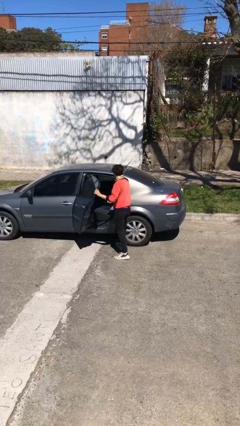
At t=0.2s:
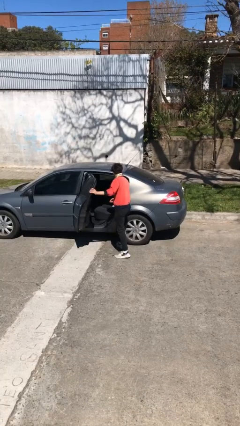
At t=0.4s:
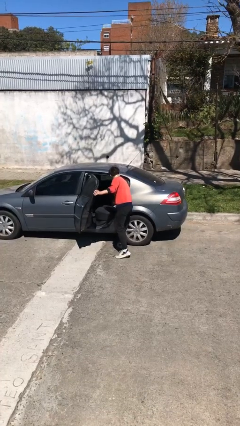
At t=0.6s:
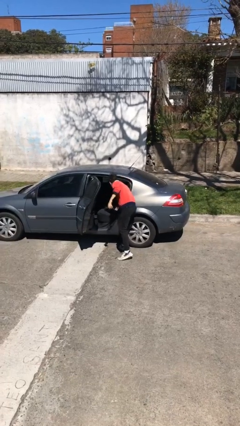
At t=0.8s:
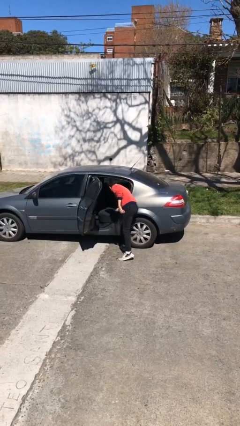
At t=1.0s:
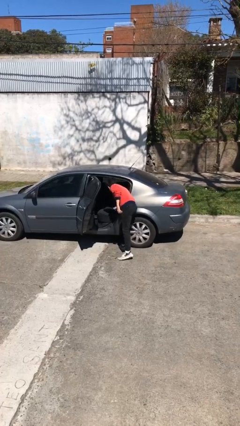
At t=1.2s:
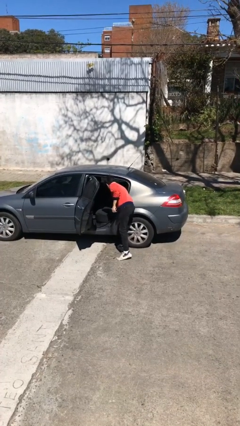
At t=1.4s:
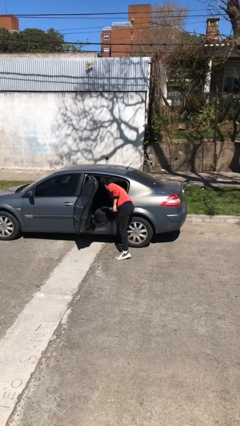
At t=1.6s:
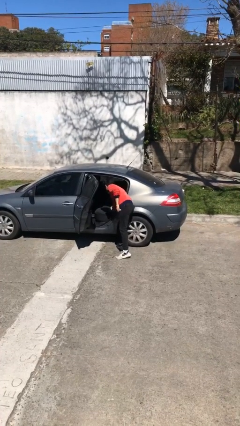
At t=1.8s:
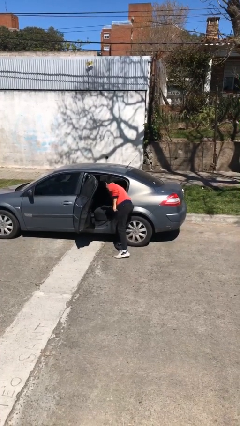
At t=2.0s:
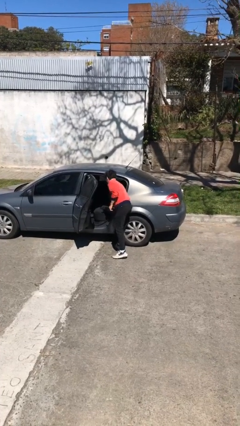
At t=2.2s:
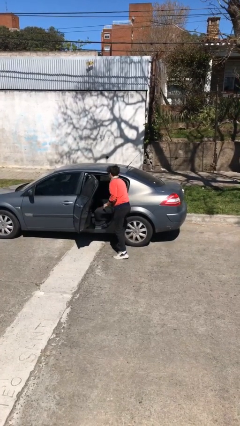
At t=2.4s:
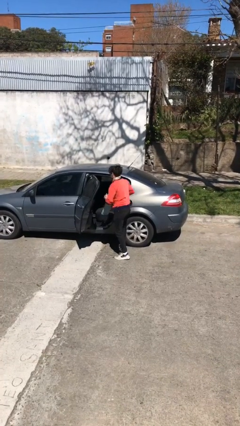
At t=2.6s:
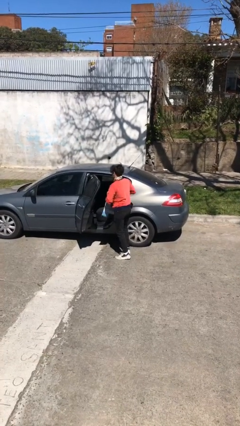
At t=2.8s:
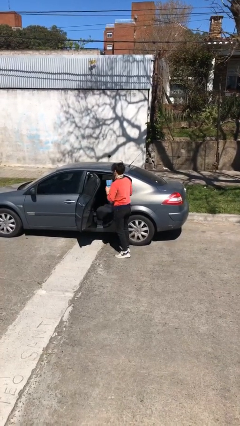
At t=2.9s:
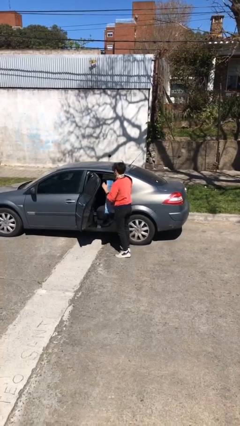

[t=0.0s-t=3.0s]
person unloads car

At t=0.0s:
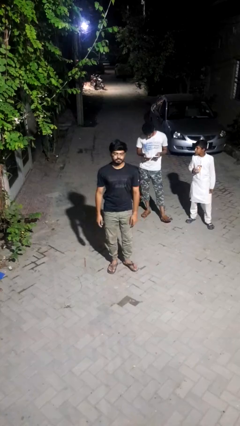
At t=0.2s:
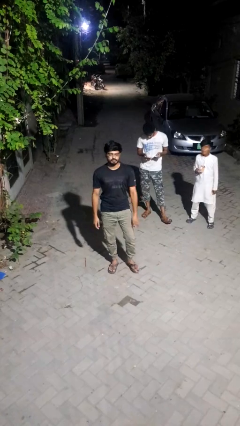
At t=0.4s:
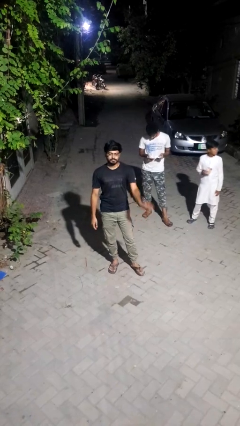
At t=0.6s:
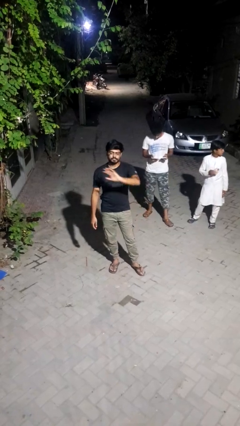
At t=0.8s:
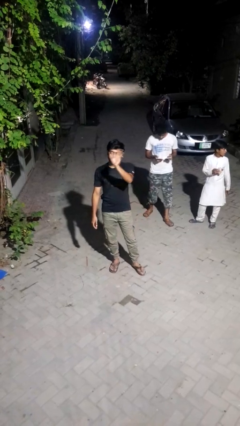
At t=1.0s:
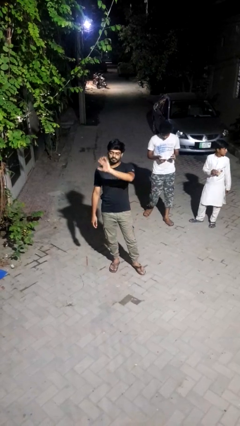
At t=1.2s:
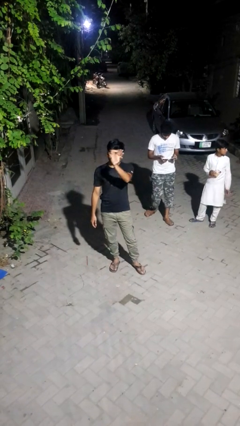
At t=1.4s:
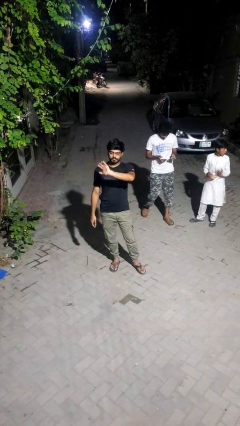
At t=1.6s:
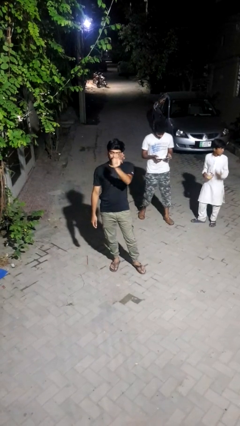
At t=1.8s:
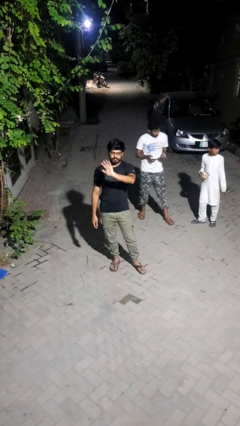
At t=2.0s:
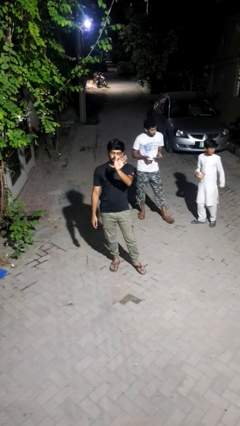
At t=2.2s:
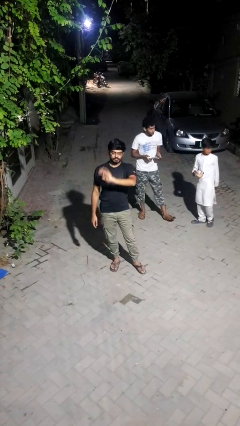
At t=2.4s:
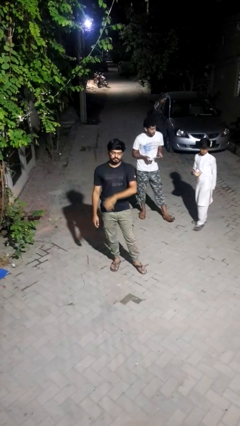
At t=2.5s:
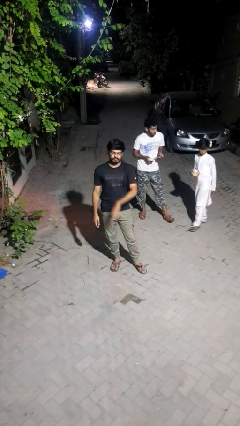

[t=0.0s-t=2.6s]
person waves at person

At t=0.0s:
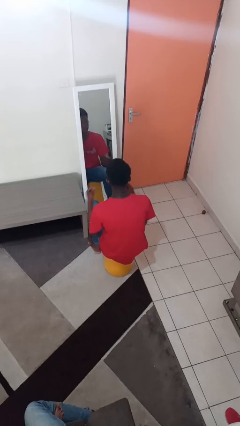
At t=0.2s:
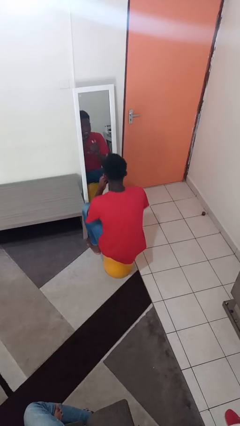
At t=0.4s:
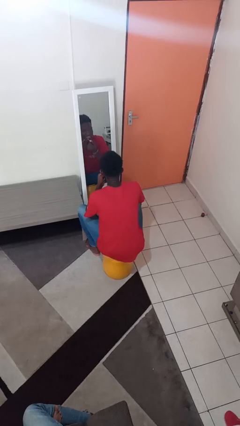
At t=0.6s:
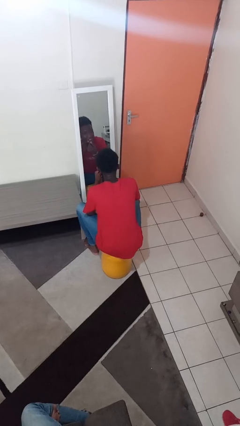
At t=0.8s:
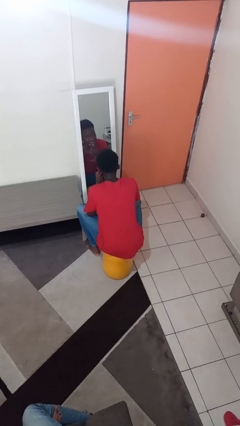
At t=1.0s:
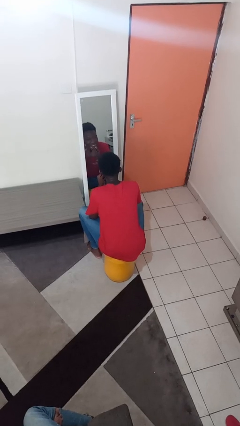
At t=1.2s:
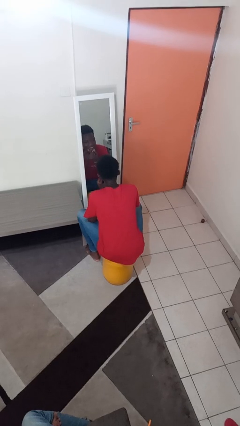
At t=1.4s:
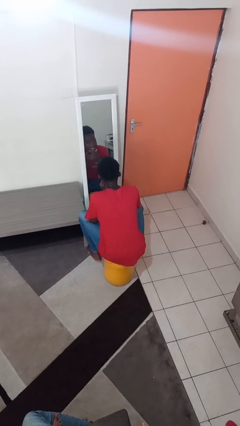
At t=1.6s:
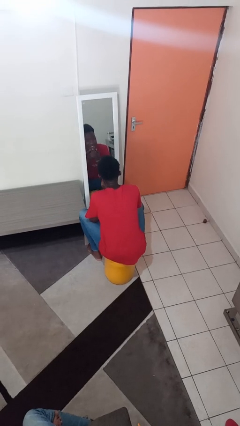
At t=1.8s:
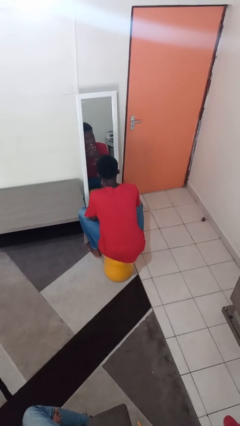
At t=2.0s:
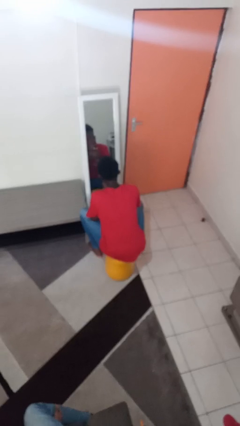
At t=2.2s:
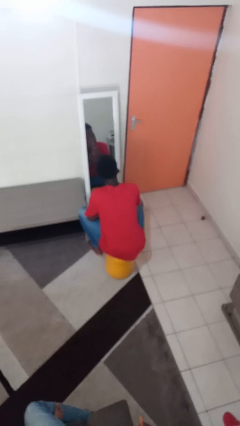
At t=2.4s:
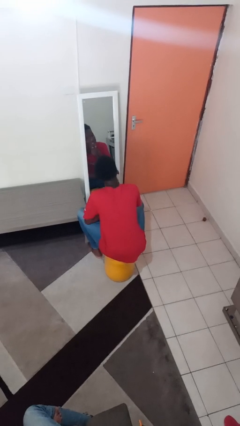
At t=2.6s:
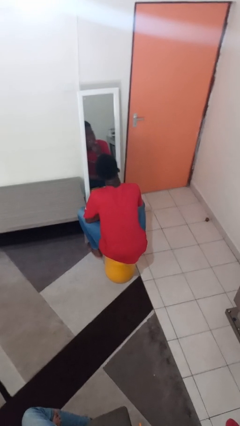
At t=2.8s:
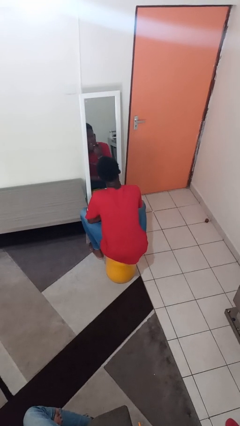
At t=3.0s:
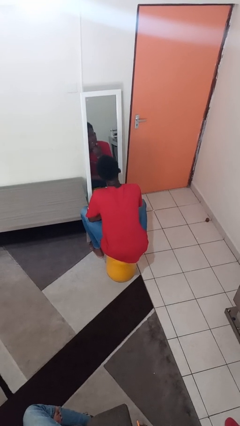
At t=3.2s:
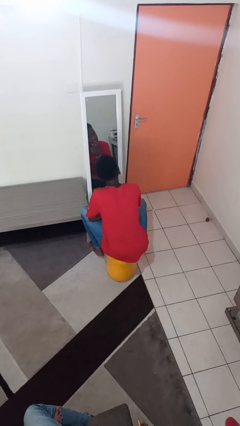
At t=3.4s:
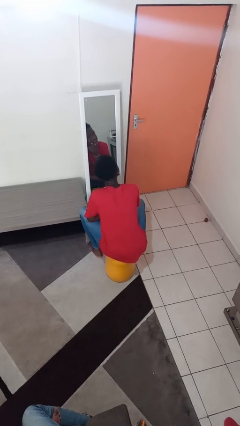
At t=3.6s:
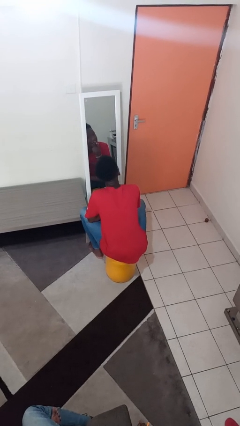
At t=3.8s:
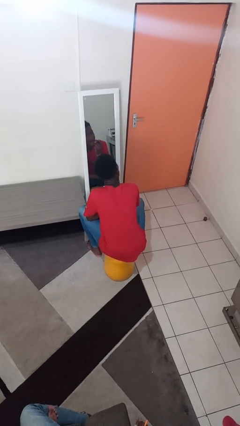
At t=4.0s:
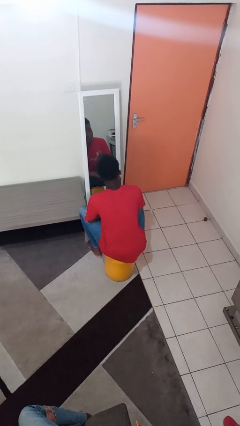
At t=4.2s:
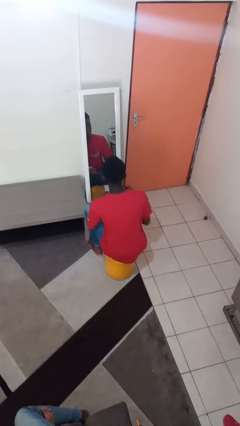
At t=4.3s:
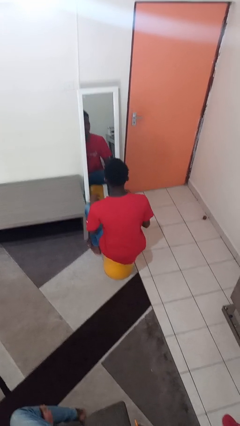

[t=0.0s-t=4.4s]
person applies lip makeup

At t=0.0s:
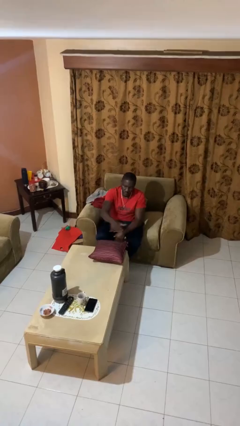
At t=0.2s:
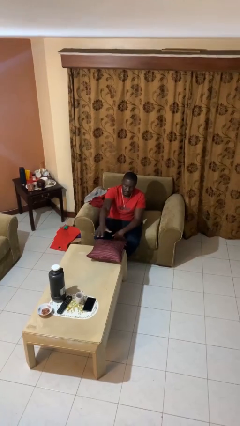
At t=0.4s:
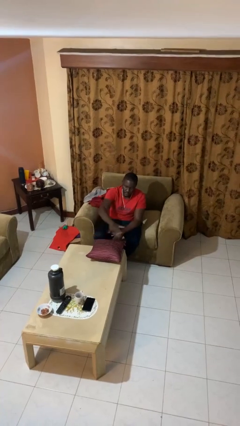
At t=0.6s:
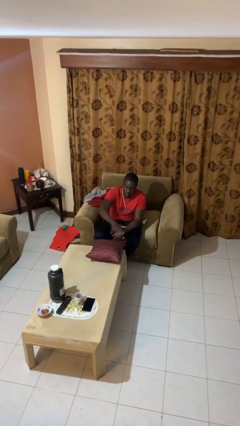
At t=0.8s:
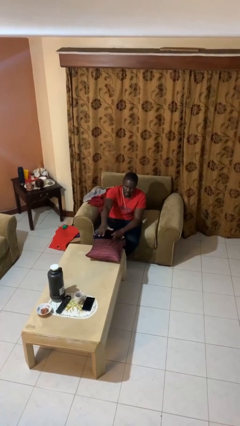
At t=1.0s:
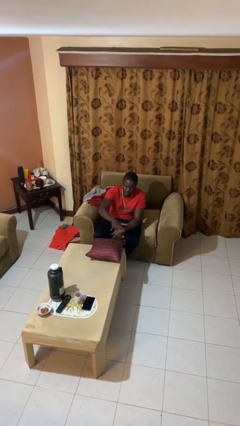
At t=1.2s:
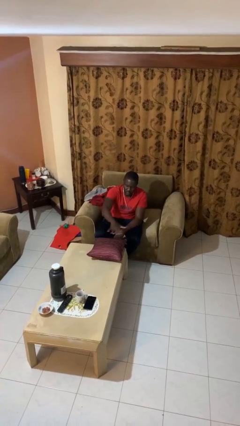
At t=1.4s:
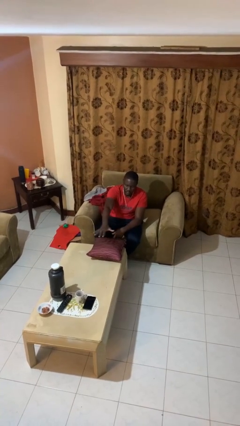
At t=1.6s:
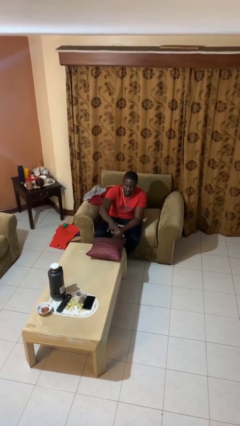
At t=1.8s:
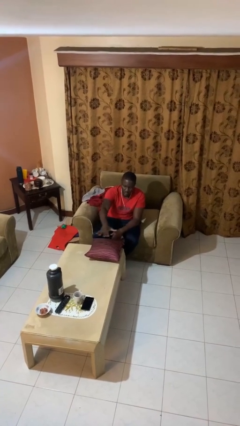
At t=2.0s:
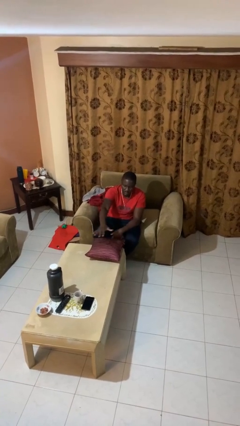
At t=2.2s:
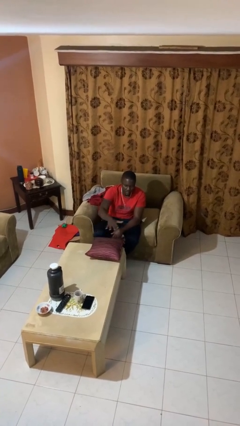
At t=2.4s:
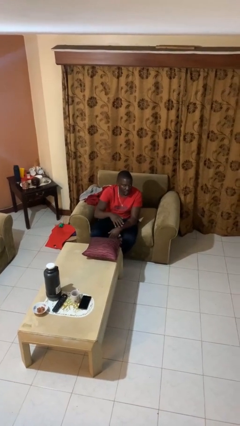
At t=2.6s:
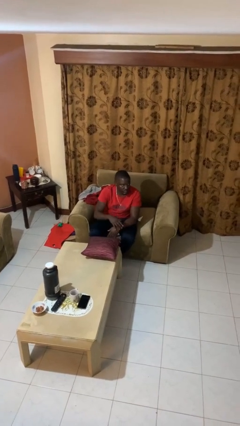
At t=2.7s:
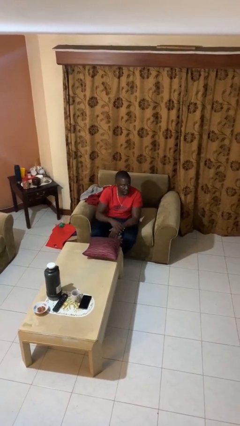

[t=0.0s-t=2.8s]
person waves hand over object

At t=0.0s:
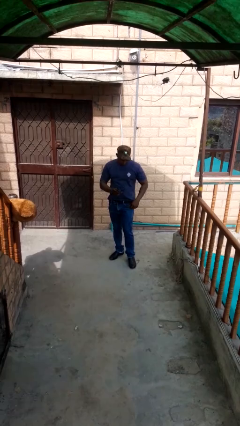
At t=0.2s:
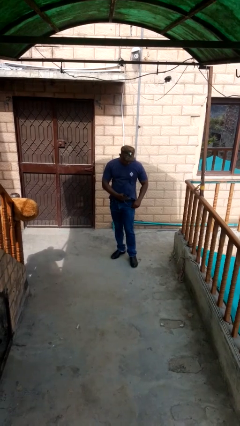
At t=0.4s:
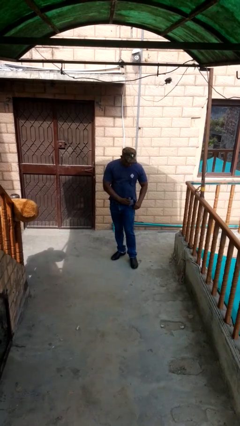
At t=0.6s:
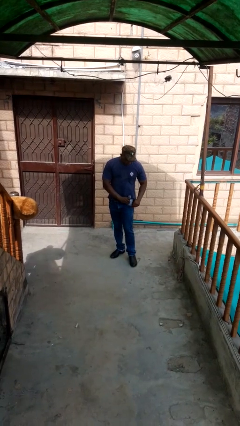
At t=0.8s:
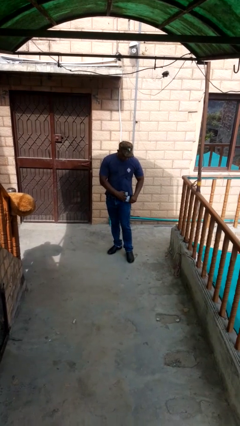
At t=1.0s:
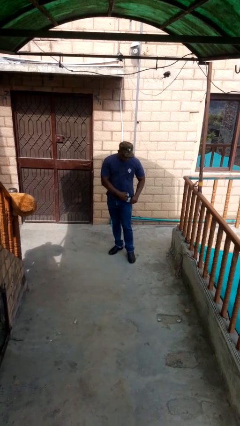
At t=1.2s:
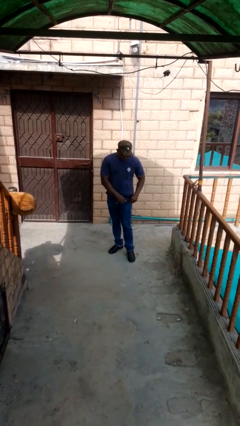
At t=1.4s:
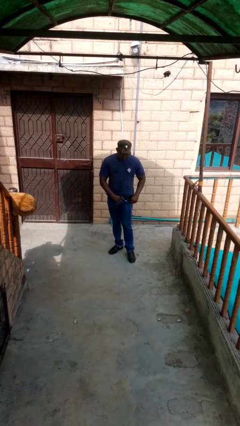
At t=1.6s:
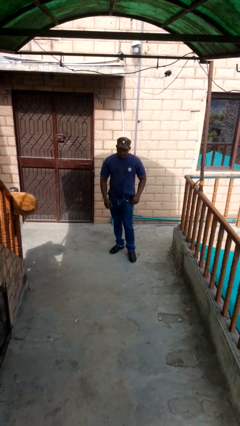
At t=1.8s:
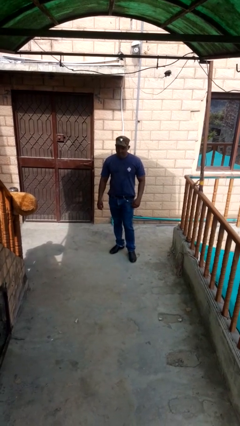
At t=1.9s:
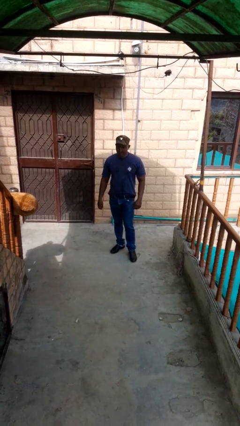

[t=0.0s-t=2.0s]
person puts phone into pocket

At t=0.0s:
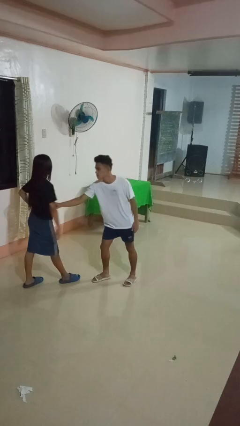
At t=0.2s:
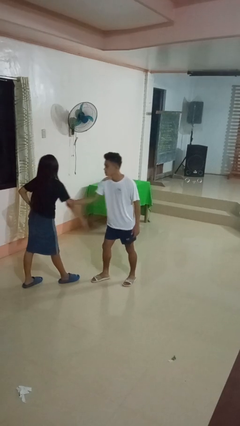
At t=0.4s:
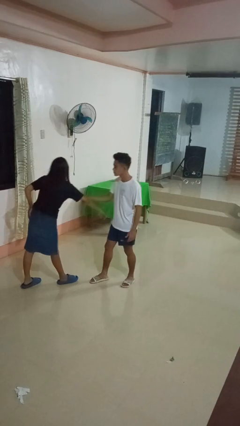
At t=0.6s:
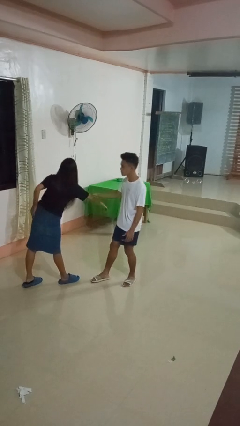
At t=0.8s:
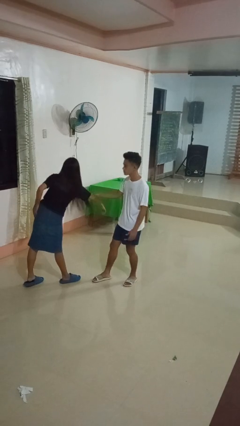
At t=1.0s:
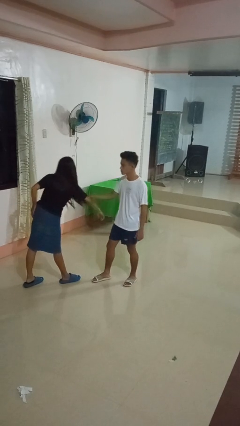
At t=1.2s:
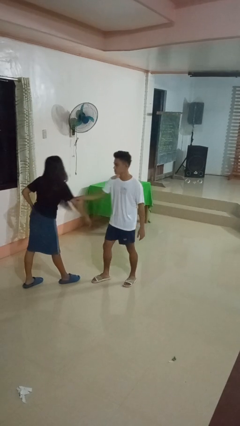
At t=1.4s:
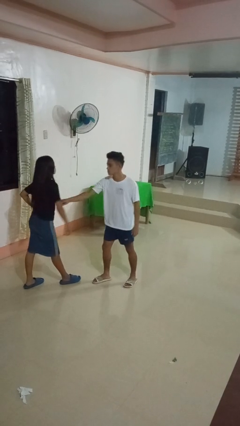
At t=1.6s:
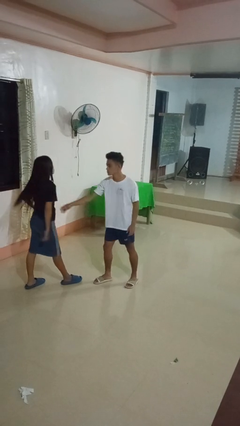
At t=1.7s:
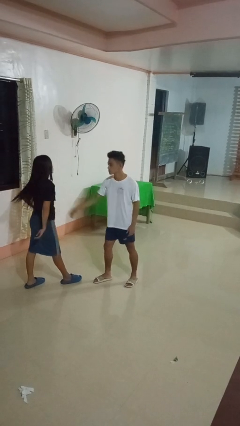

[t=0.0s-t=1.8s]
person grabs person by bicep

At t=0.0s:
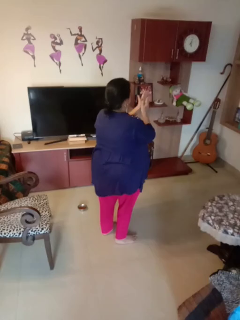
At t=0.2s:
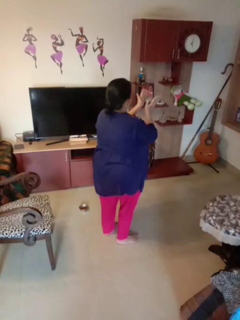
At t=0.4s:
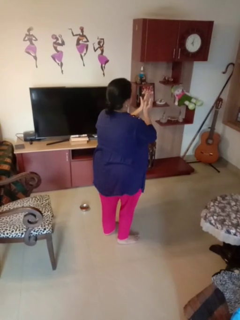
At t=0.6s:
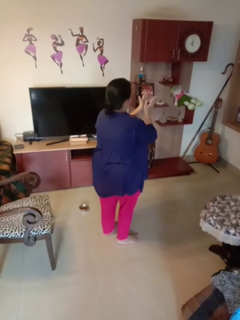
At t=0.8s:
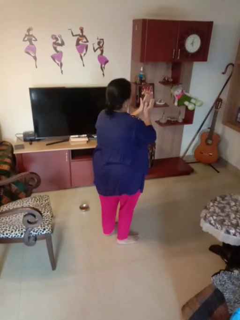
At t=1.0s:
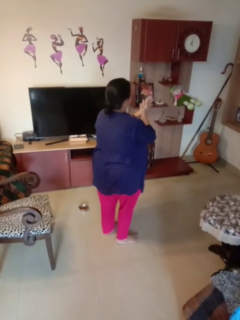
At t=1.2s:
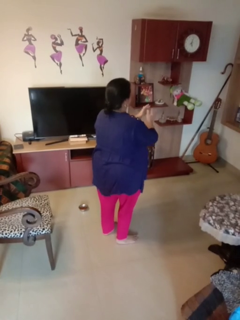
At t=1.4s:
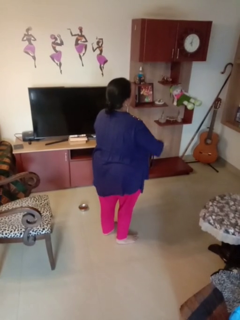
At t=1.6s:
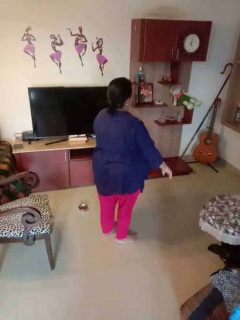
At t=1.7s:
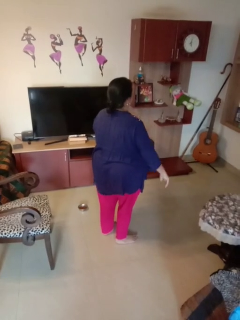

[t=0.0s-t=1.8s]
person claps hands
